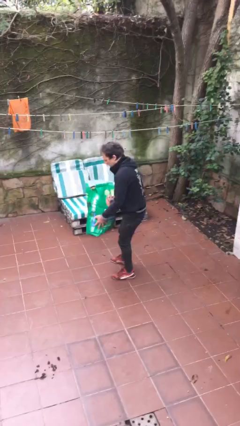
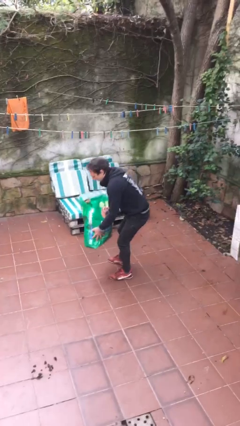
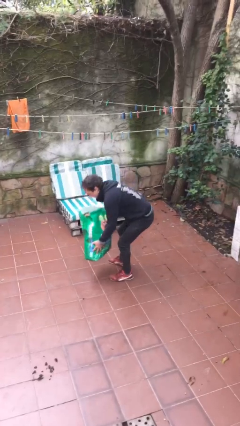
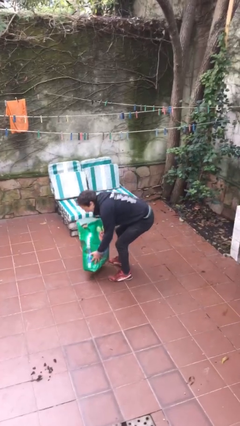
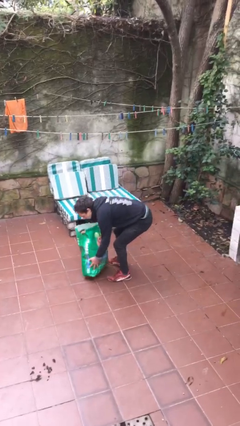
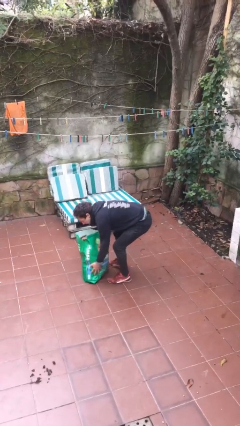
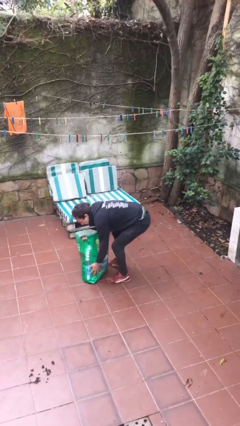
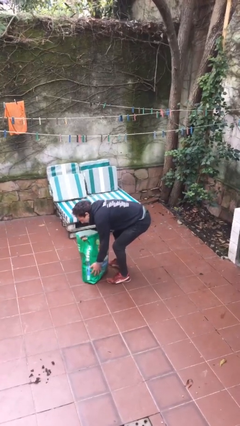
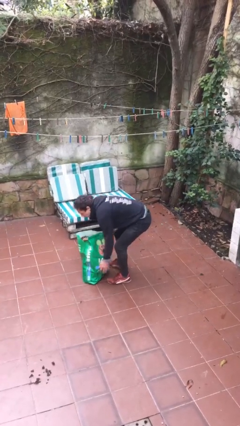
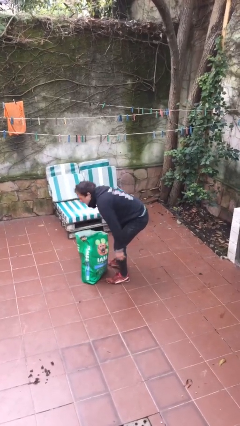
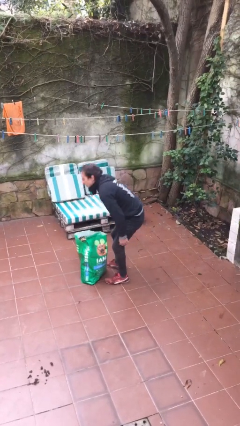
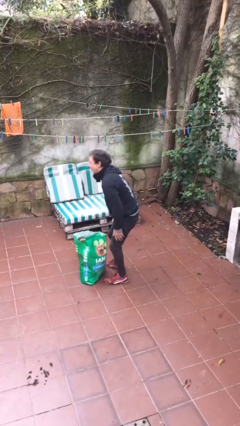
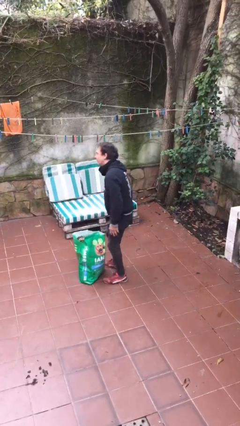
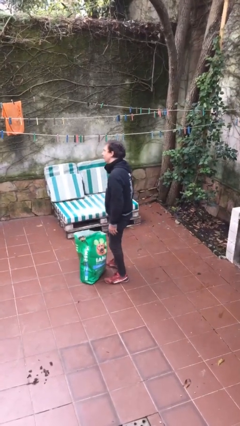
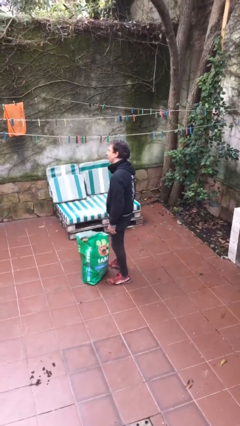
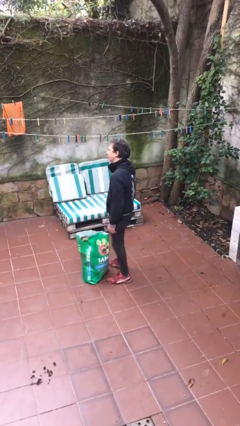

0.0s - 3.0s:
person puts down object on floor

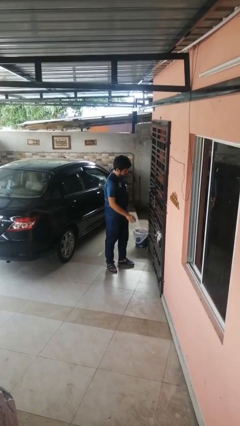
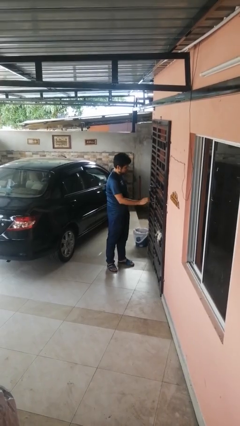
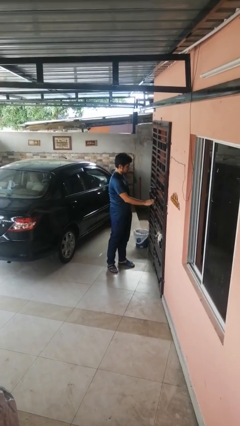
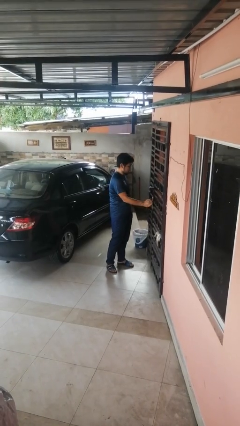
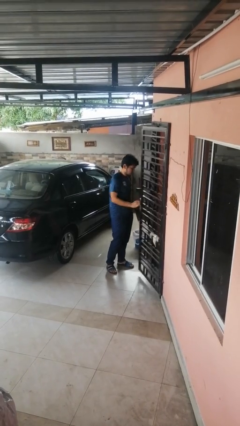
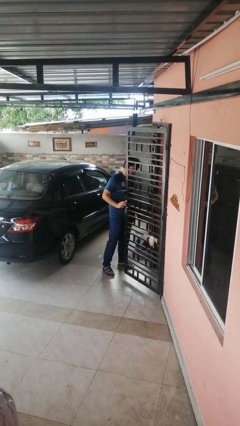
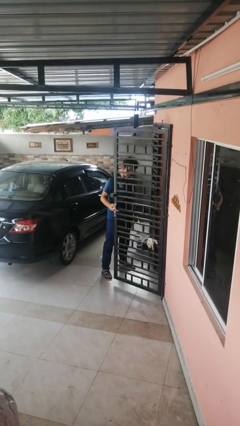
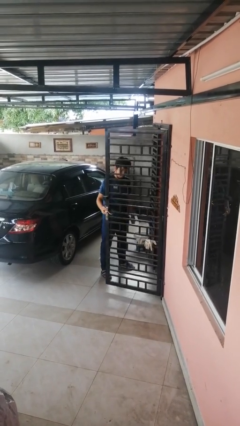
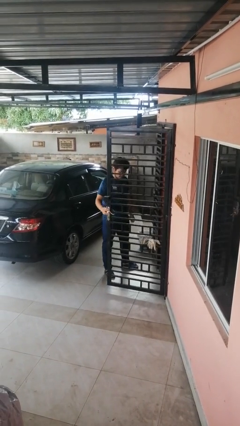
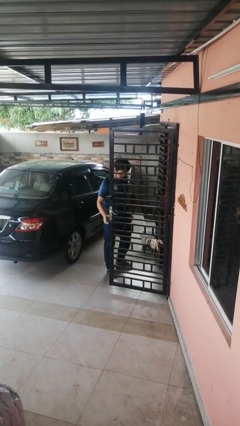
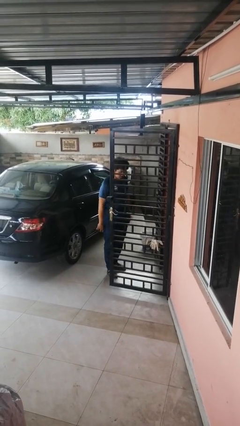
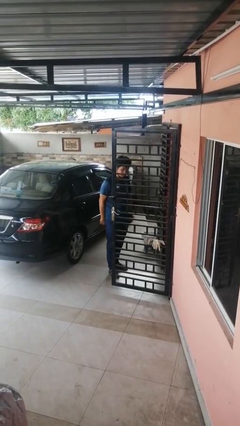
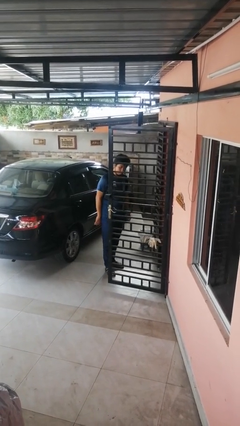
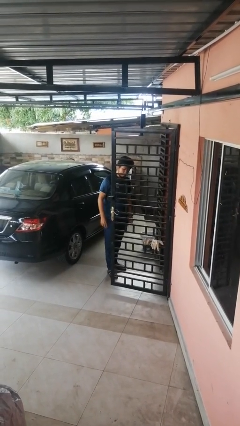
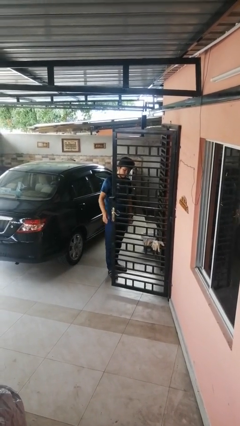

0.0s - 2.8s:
person opens gate

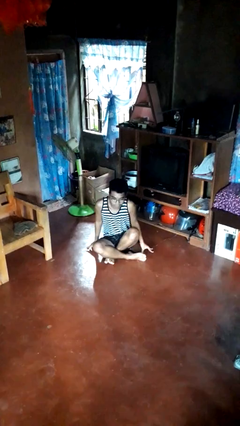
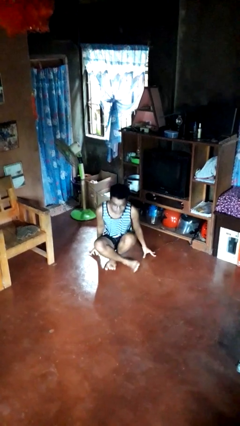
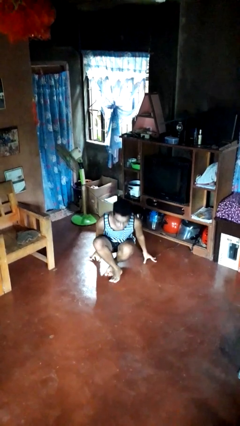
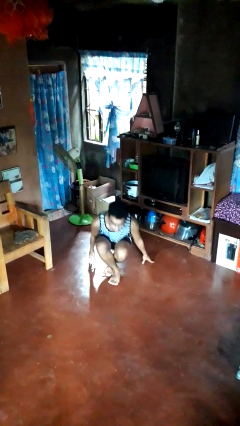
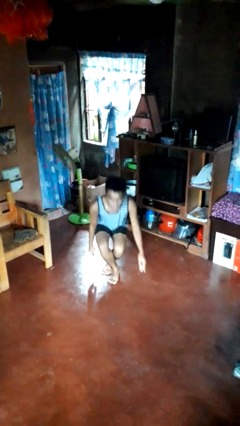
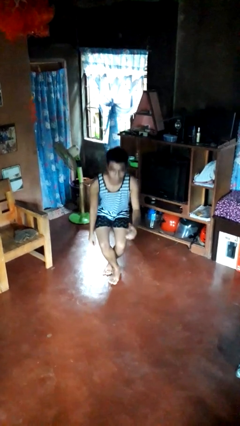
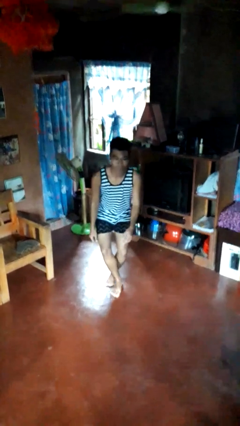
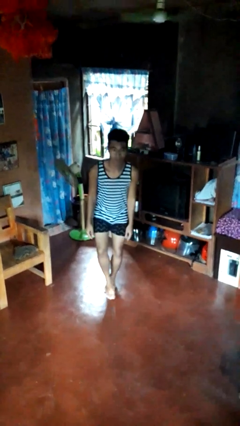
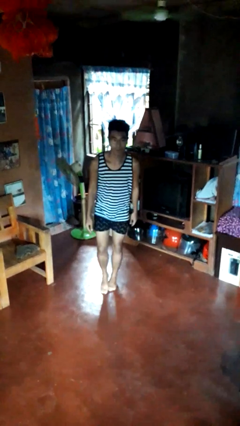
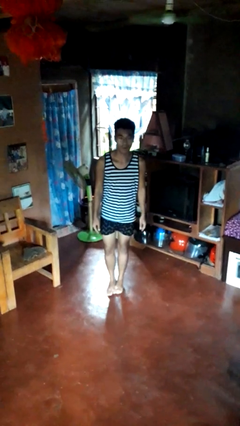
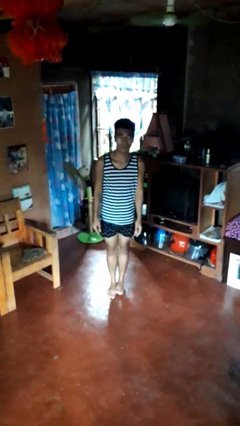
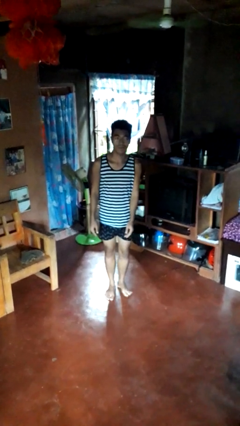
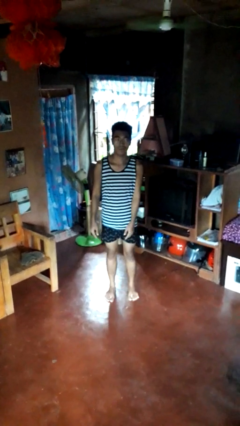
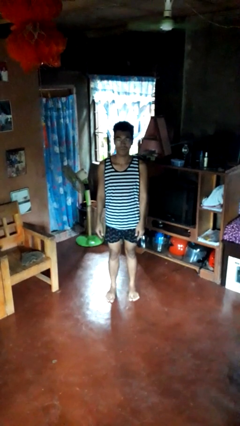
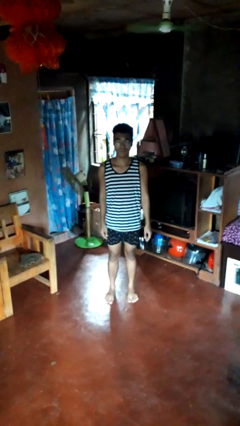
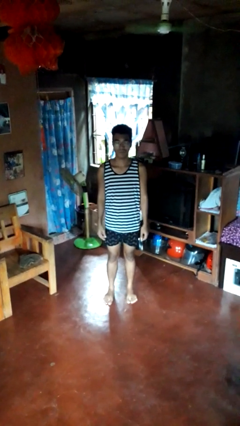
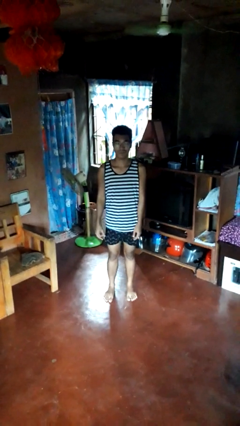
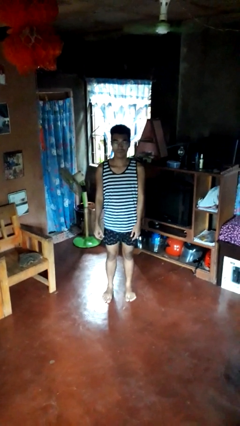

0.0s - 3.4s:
person stands up from floor

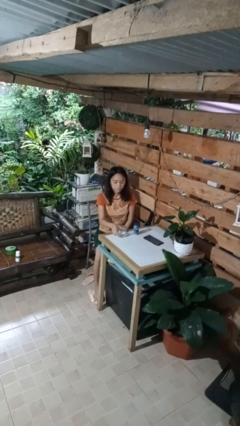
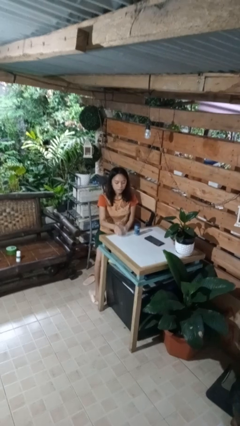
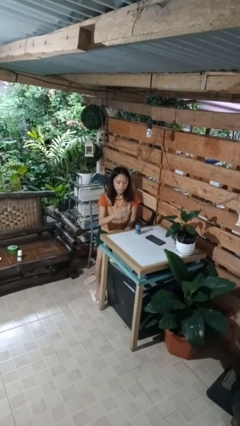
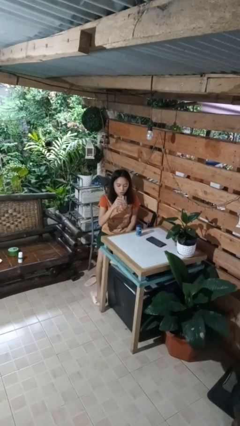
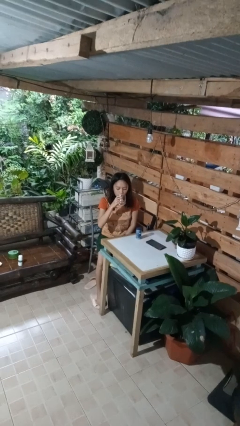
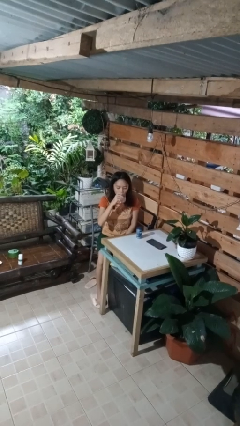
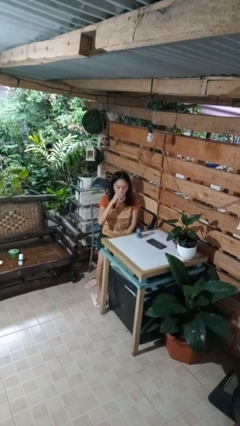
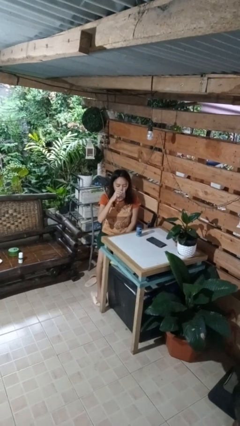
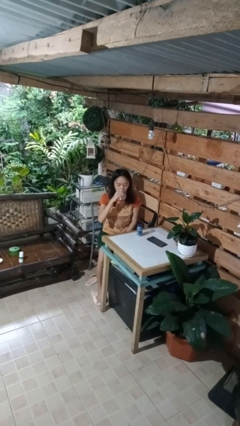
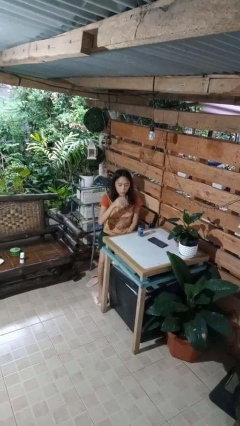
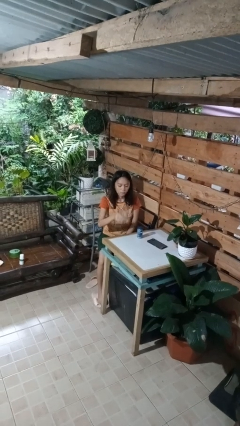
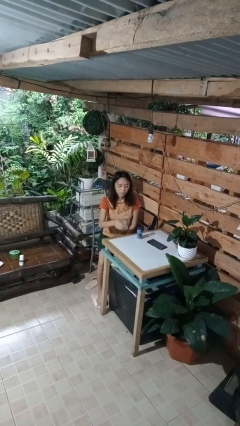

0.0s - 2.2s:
person drinks from cup

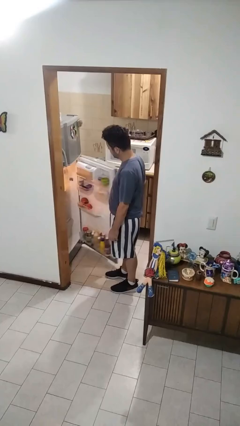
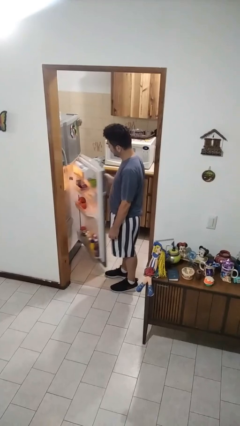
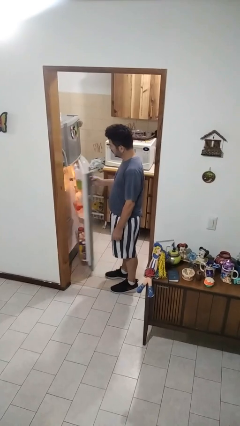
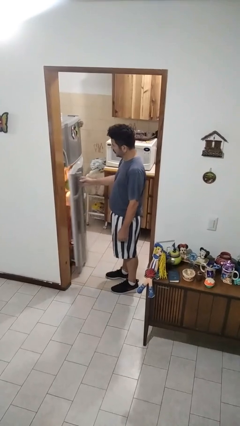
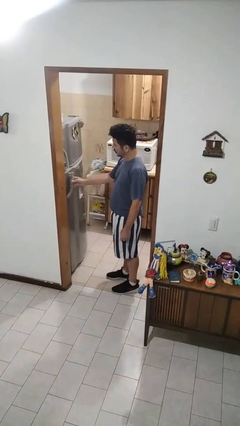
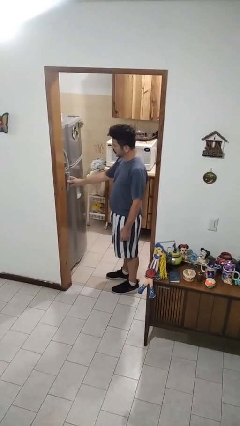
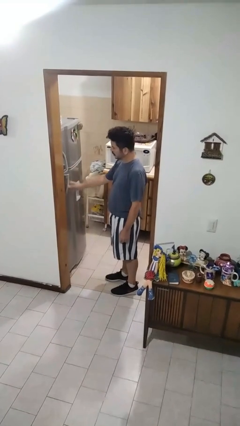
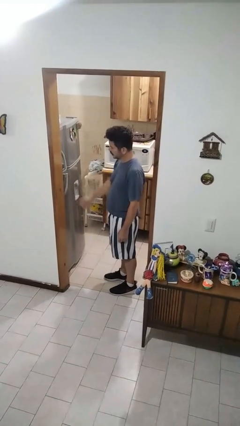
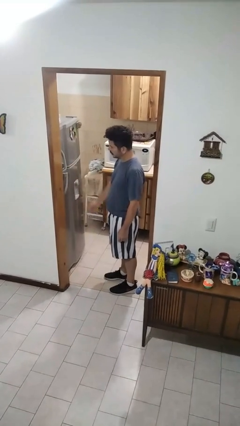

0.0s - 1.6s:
person closes refrigerator

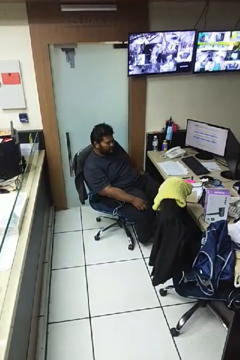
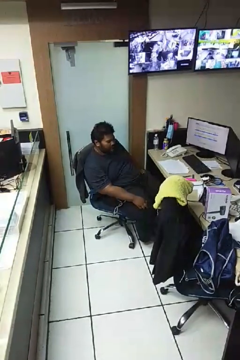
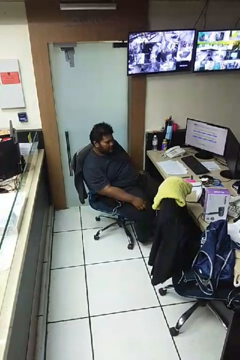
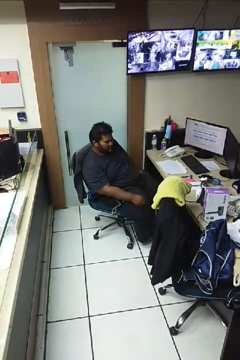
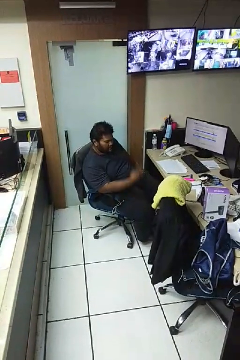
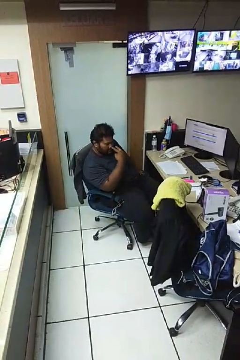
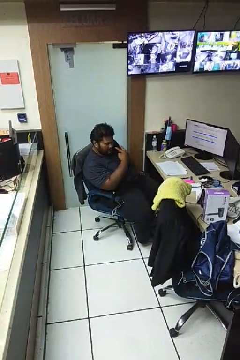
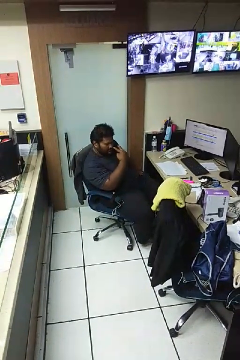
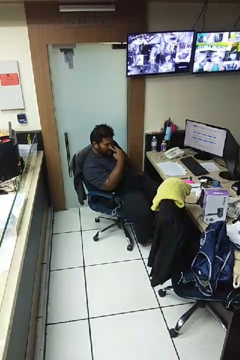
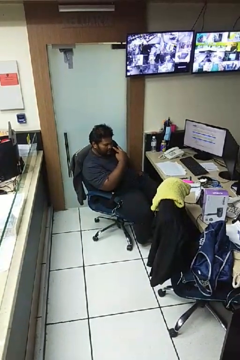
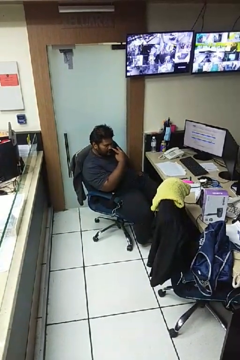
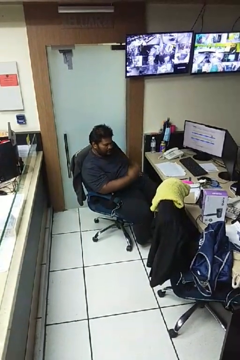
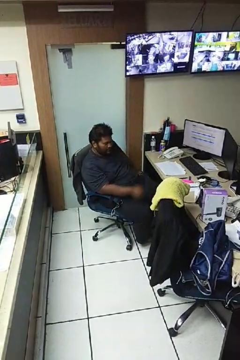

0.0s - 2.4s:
person gestures watch closely

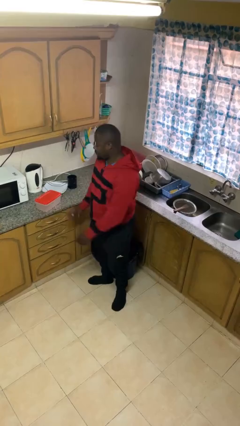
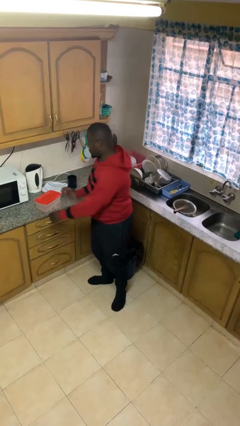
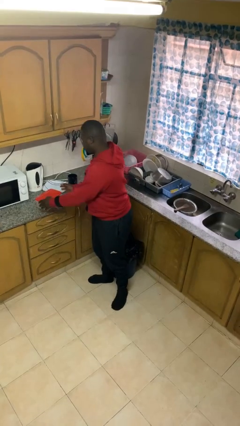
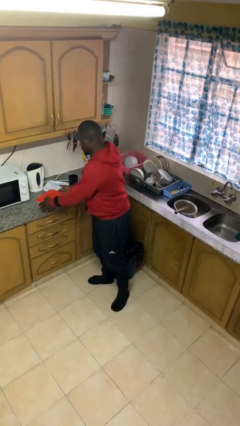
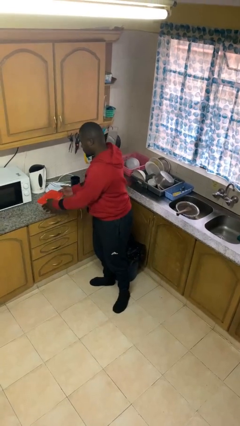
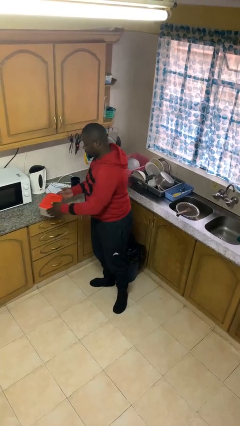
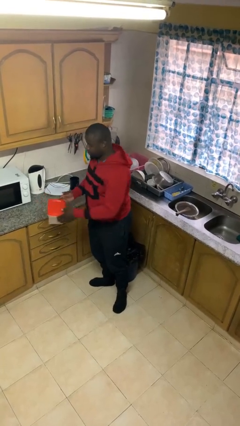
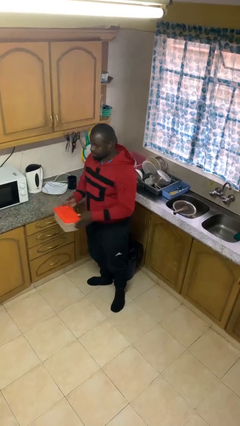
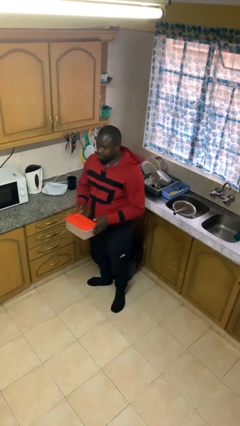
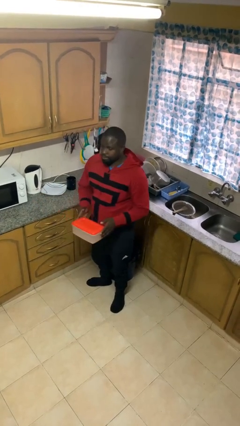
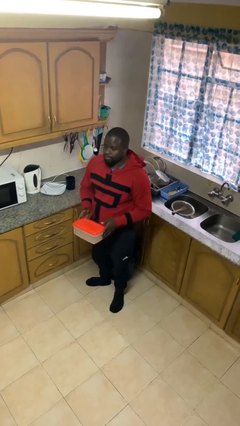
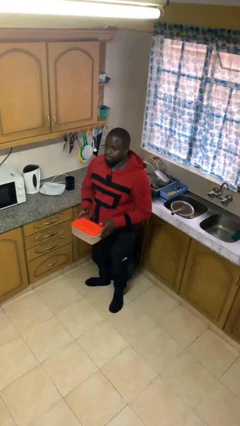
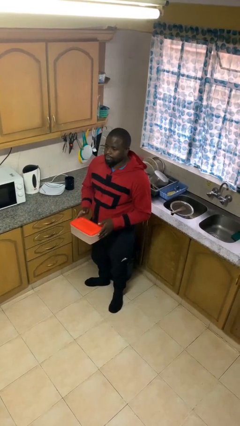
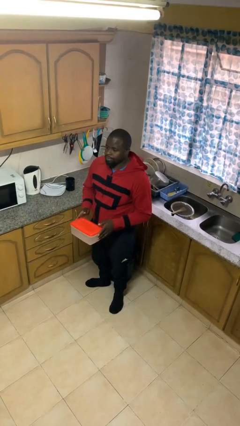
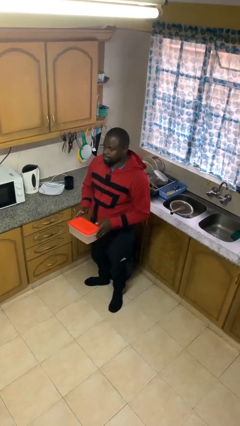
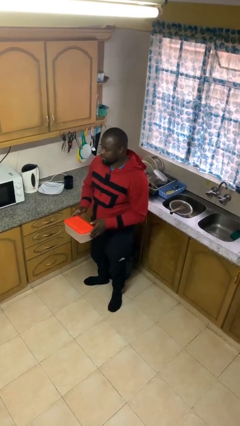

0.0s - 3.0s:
person picks up object from countertop
